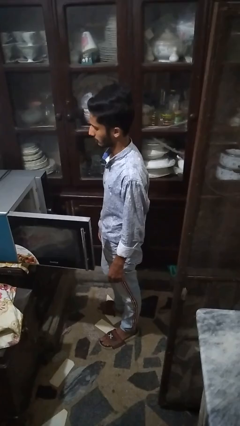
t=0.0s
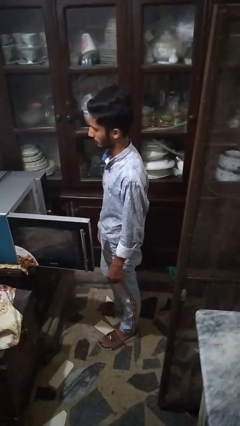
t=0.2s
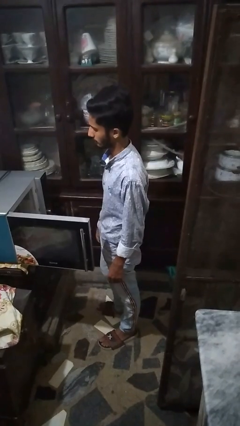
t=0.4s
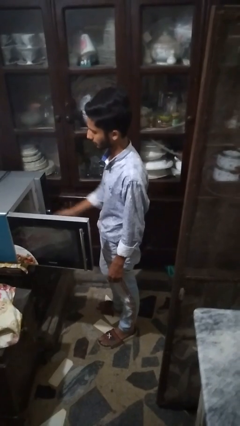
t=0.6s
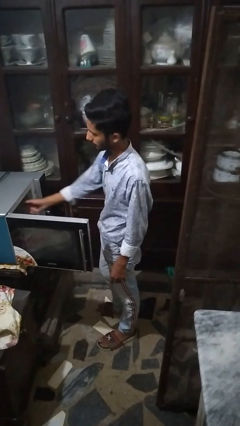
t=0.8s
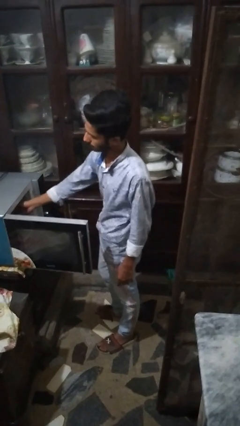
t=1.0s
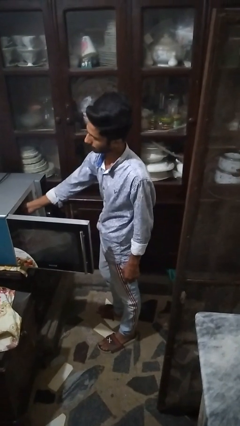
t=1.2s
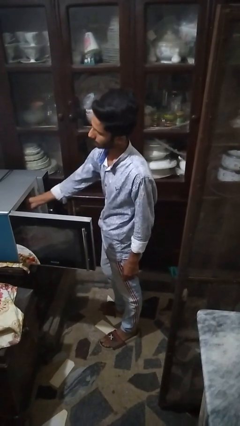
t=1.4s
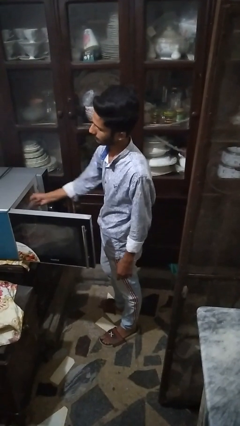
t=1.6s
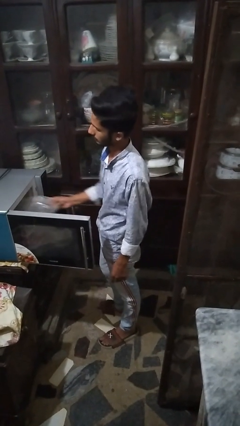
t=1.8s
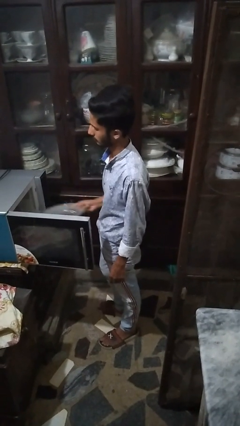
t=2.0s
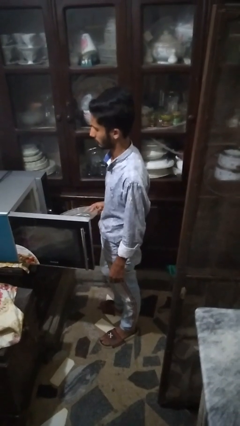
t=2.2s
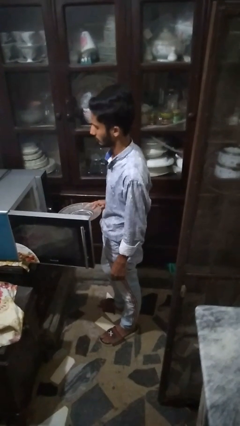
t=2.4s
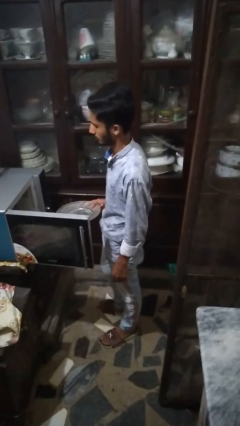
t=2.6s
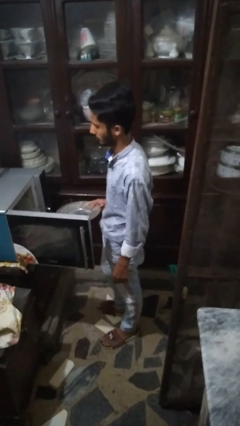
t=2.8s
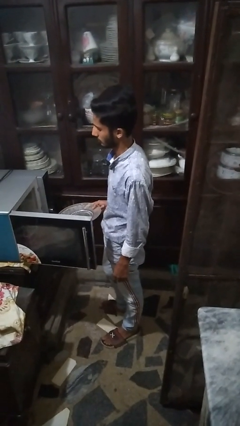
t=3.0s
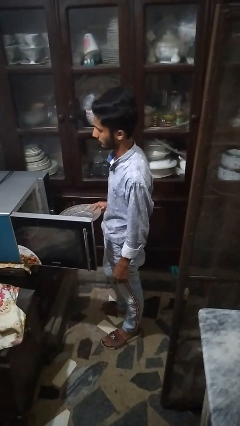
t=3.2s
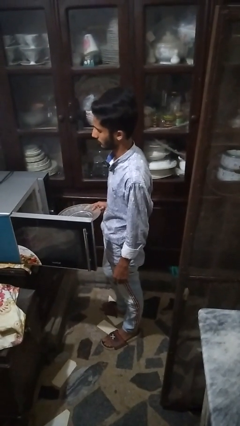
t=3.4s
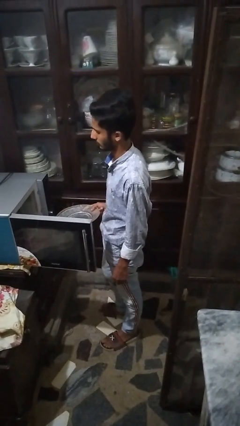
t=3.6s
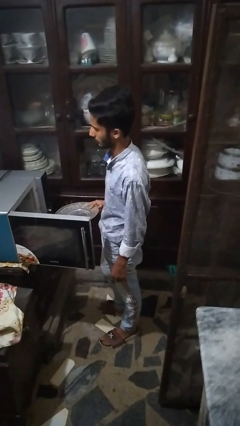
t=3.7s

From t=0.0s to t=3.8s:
person takes object from microwave

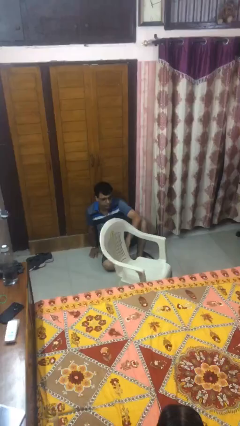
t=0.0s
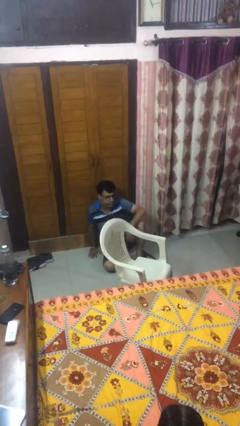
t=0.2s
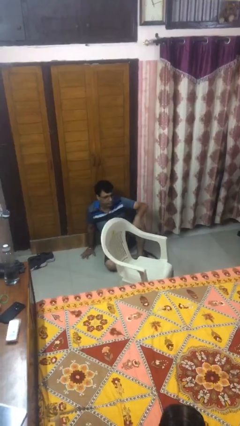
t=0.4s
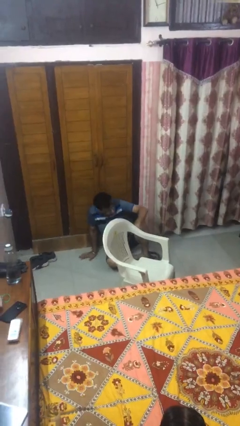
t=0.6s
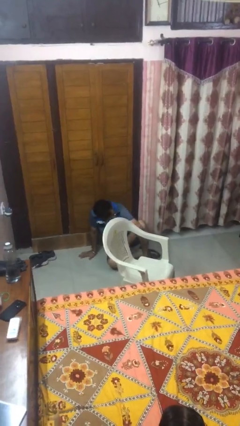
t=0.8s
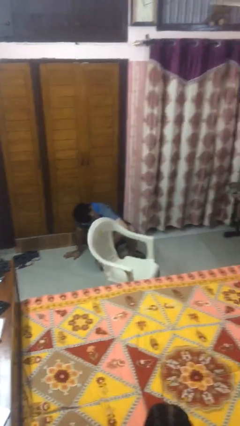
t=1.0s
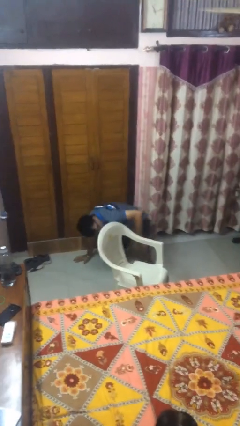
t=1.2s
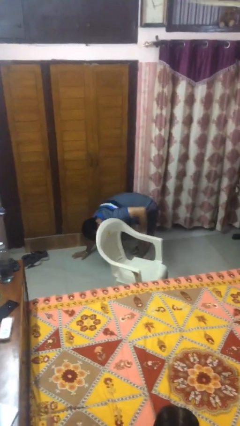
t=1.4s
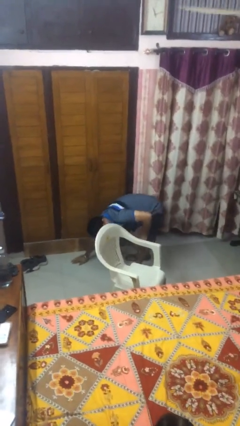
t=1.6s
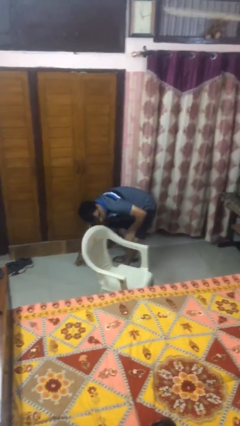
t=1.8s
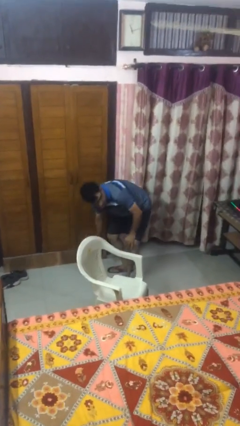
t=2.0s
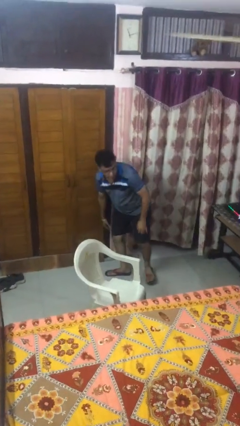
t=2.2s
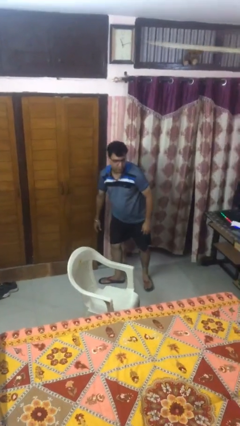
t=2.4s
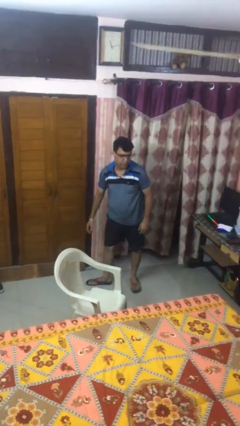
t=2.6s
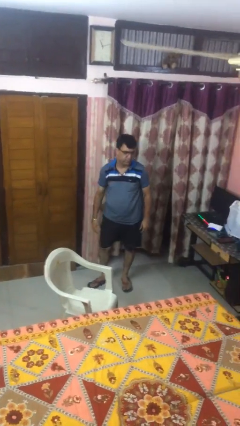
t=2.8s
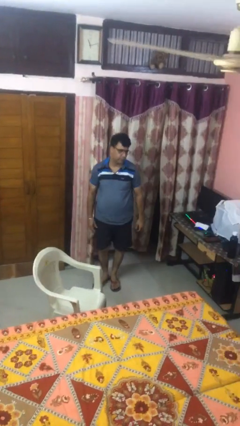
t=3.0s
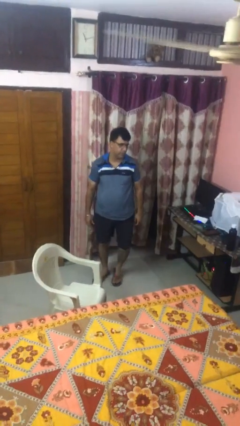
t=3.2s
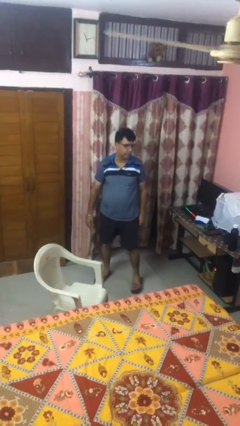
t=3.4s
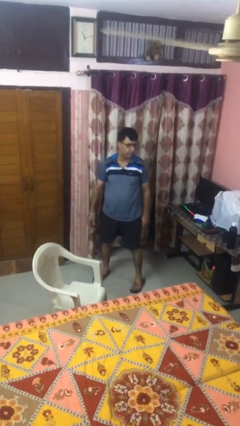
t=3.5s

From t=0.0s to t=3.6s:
person stands up from floor

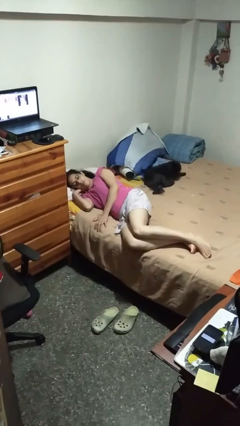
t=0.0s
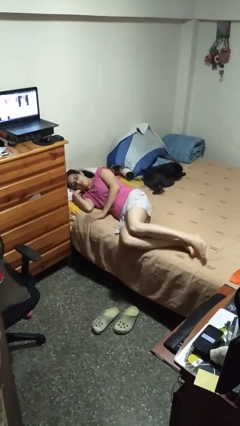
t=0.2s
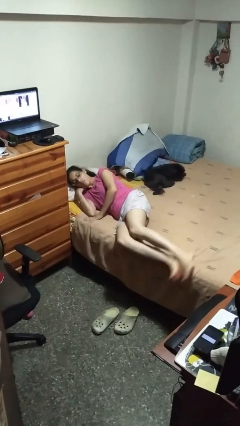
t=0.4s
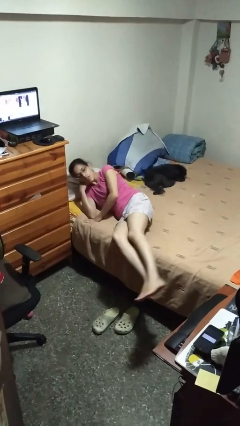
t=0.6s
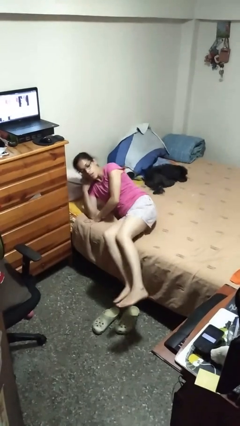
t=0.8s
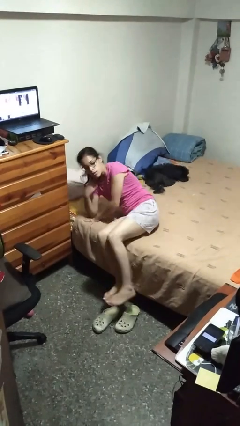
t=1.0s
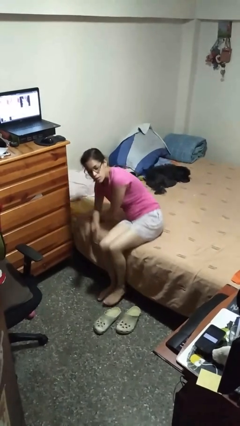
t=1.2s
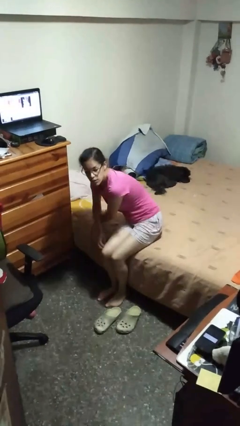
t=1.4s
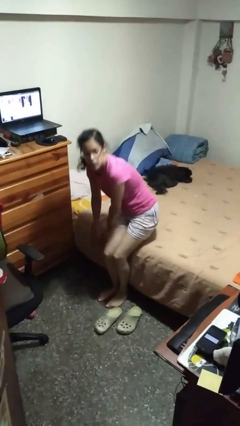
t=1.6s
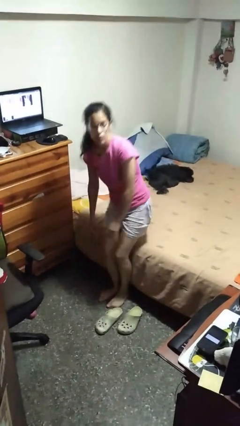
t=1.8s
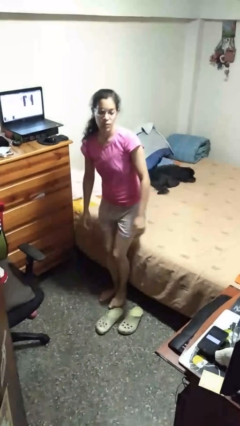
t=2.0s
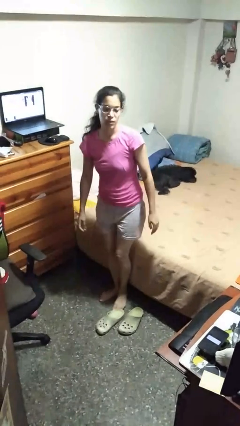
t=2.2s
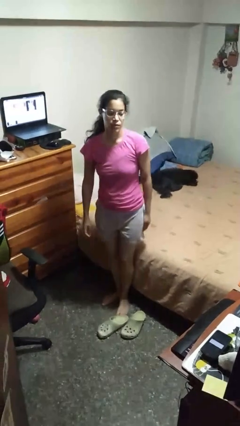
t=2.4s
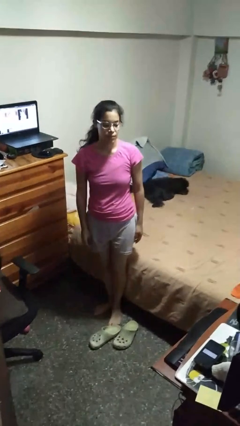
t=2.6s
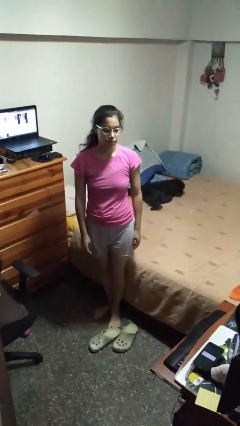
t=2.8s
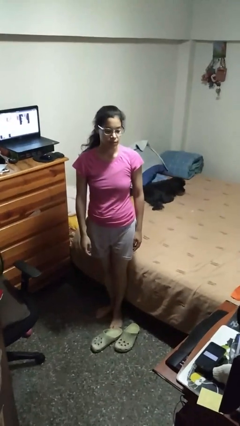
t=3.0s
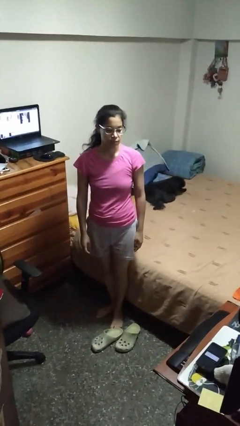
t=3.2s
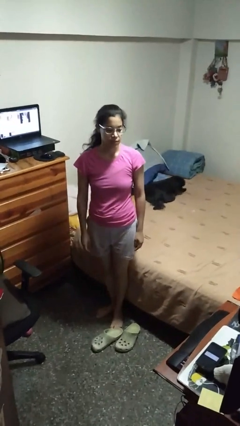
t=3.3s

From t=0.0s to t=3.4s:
person stands up

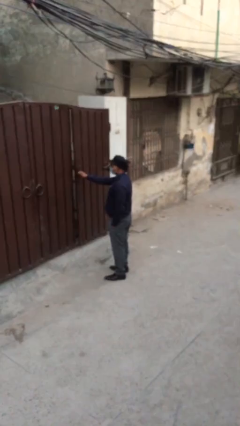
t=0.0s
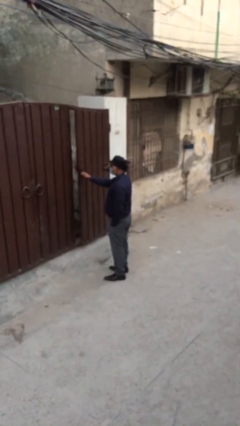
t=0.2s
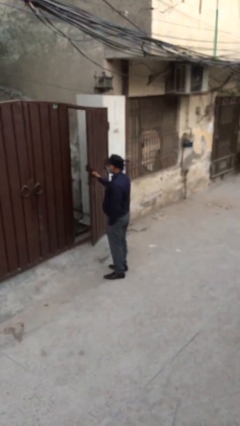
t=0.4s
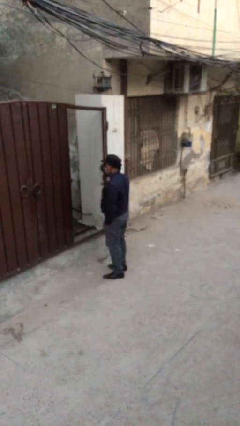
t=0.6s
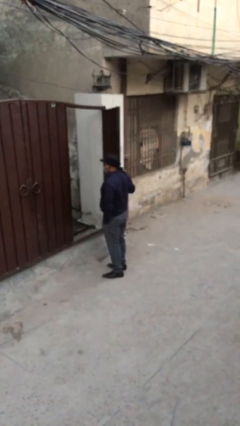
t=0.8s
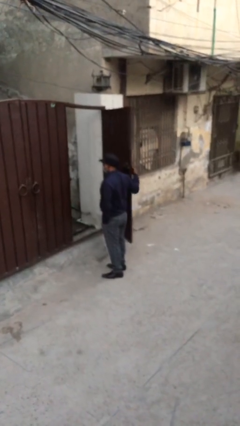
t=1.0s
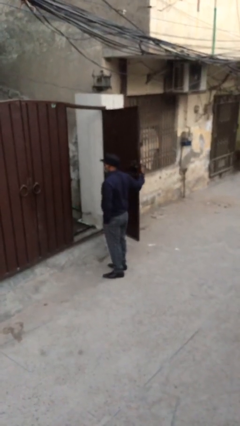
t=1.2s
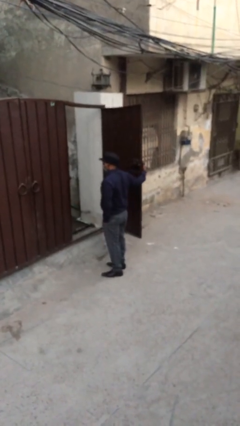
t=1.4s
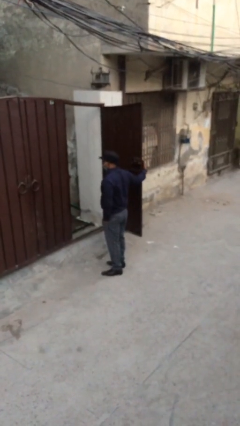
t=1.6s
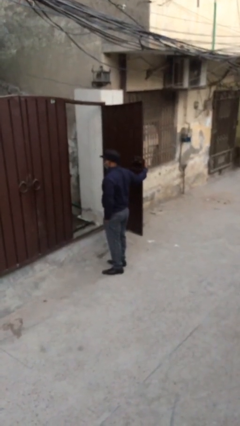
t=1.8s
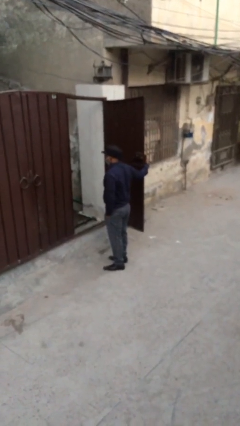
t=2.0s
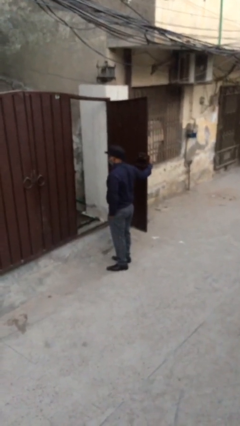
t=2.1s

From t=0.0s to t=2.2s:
person opens facility door

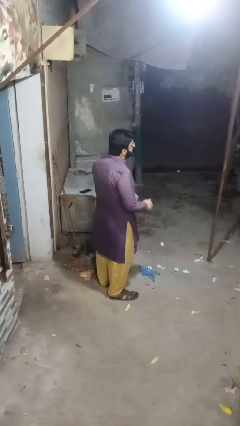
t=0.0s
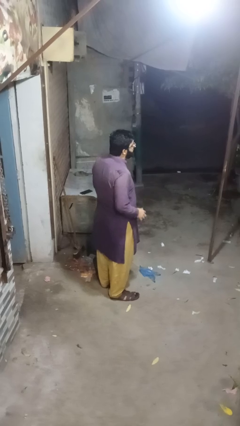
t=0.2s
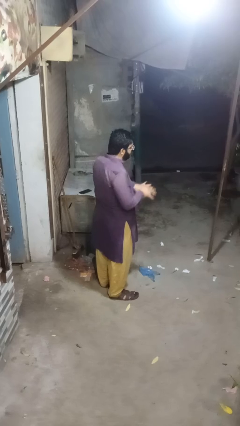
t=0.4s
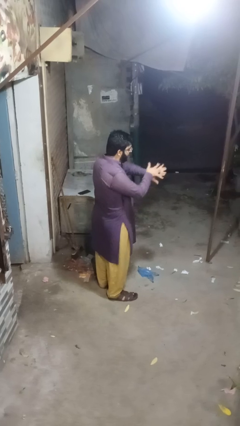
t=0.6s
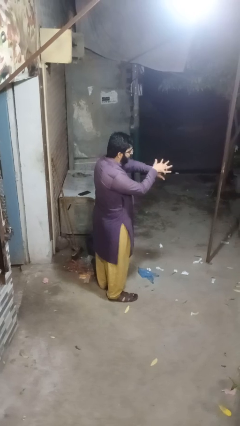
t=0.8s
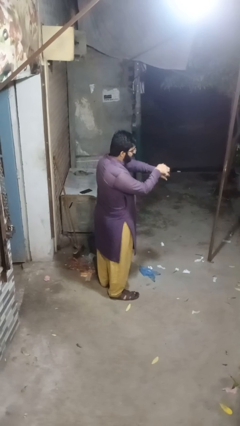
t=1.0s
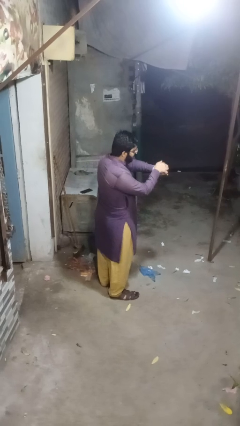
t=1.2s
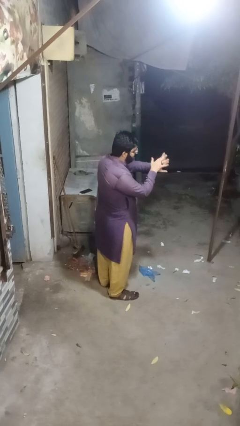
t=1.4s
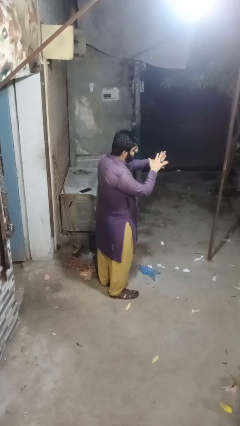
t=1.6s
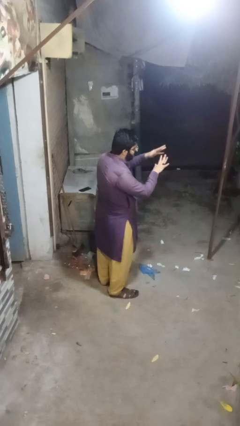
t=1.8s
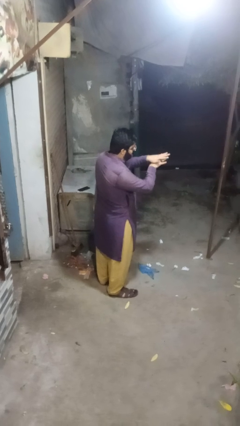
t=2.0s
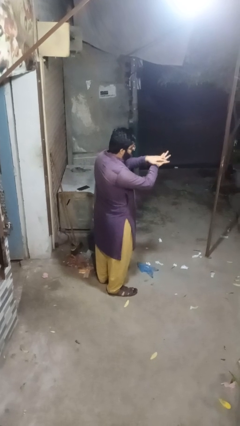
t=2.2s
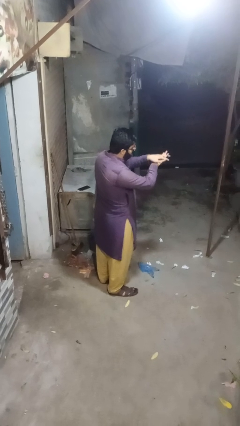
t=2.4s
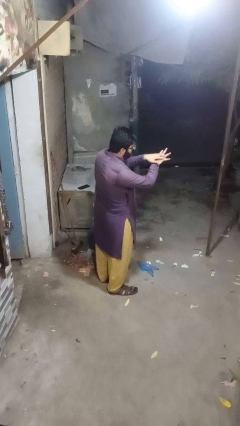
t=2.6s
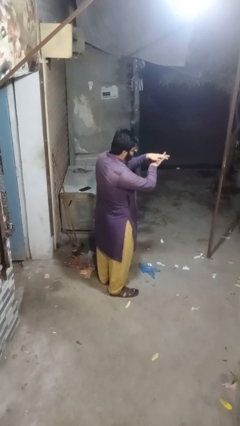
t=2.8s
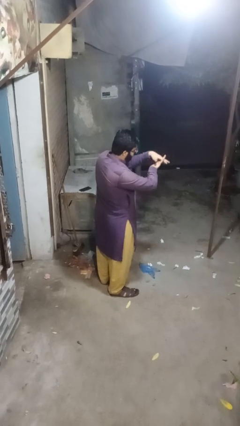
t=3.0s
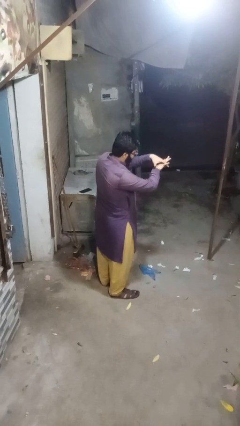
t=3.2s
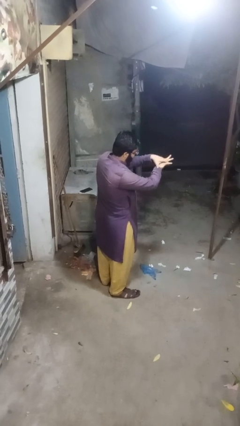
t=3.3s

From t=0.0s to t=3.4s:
person cracks knuckles

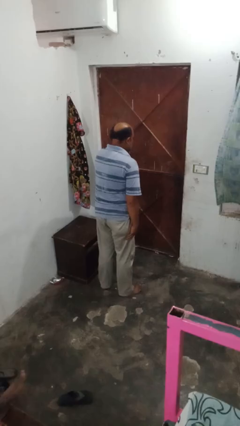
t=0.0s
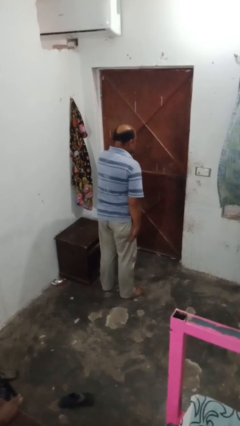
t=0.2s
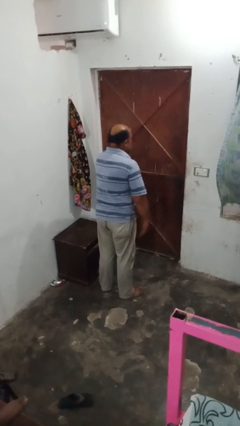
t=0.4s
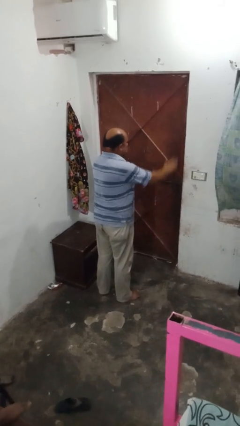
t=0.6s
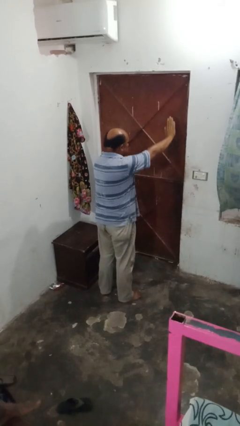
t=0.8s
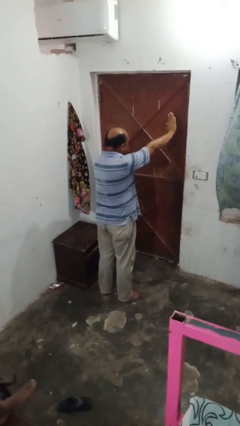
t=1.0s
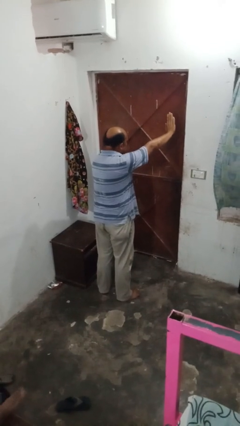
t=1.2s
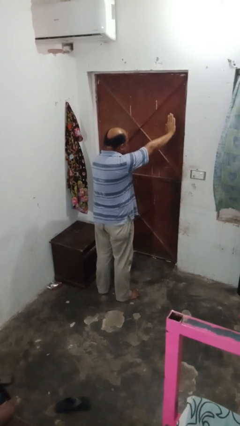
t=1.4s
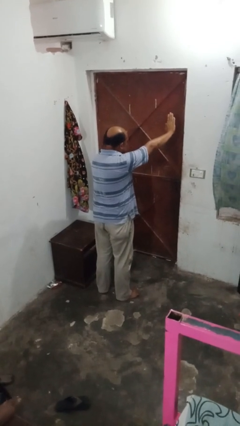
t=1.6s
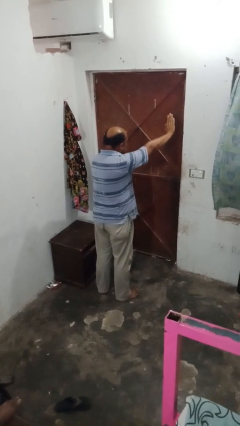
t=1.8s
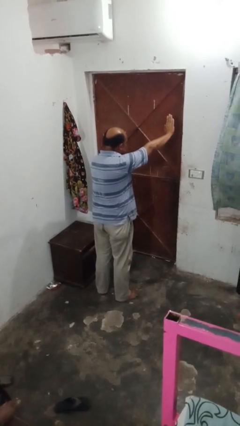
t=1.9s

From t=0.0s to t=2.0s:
person gestures stop
